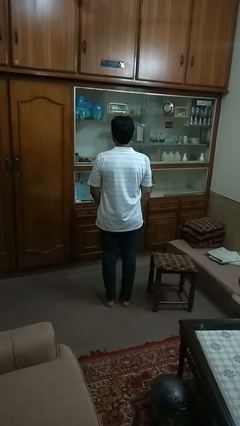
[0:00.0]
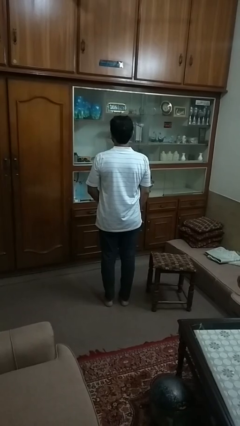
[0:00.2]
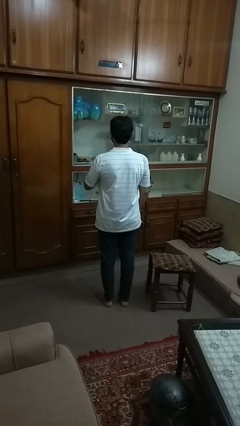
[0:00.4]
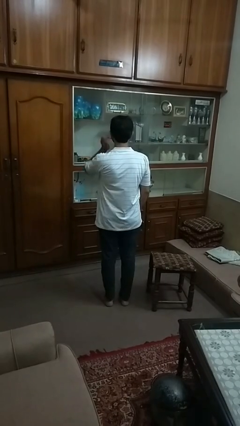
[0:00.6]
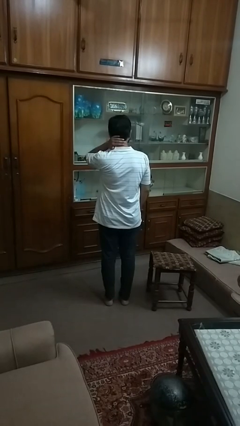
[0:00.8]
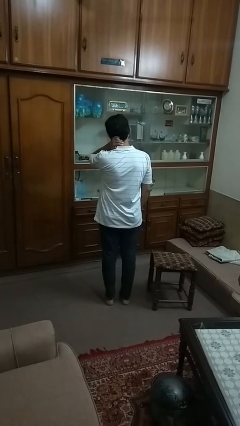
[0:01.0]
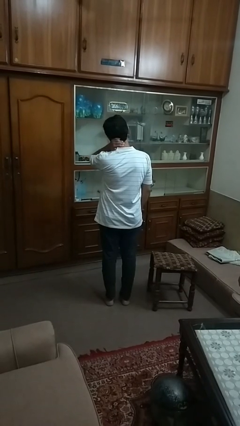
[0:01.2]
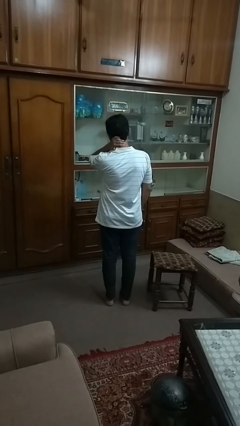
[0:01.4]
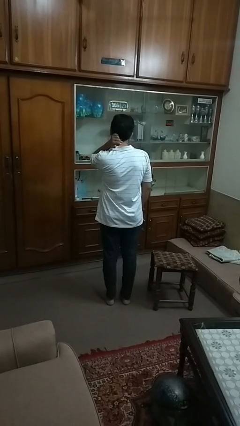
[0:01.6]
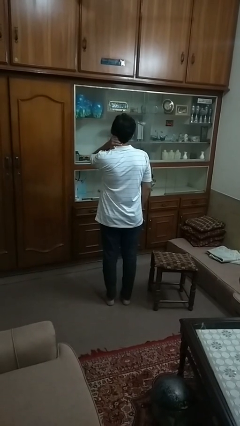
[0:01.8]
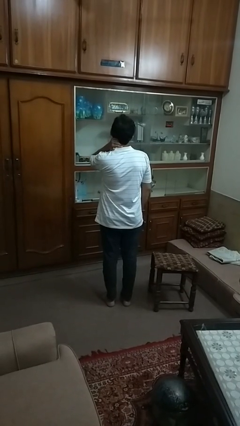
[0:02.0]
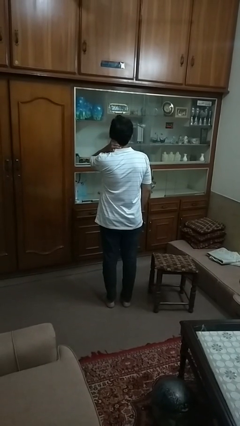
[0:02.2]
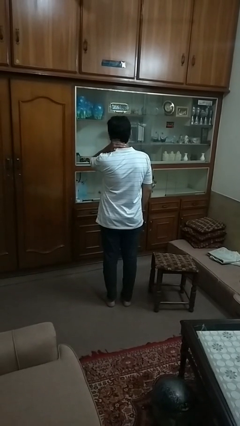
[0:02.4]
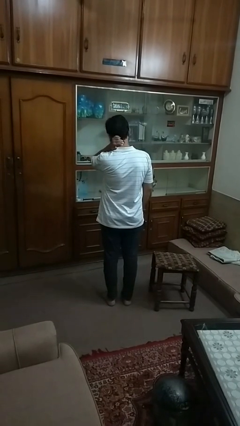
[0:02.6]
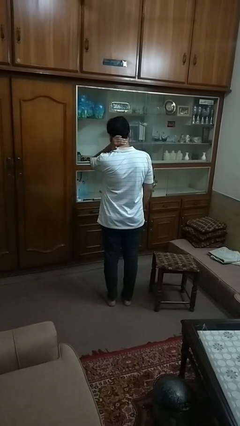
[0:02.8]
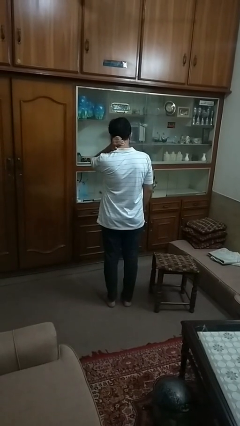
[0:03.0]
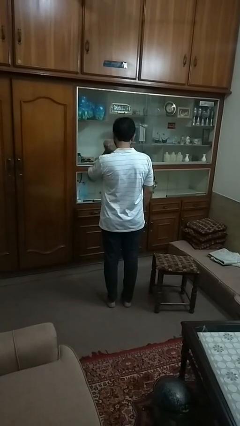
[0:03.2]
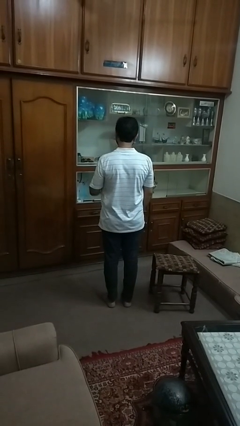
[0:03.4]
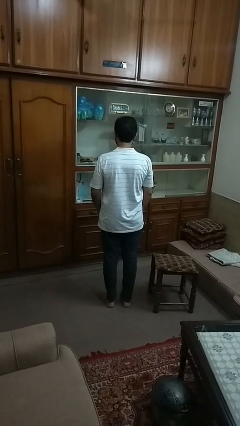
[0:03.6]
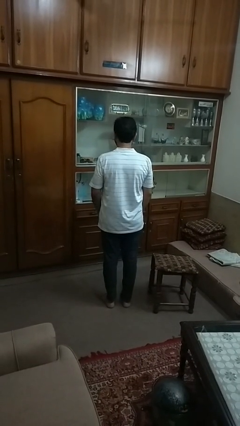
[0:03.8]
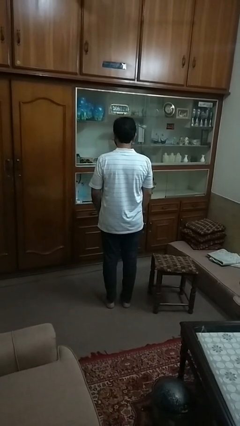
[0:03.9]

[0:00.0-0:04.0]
person rubs neck

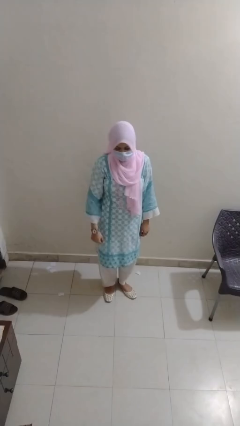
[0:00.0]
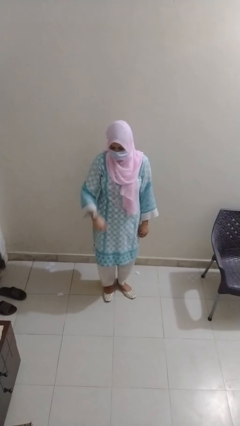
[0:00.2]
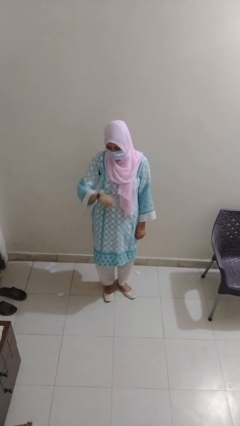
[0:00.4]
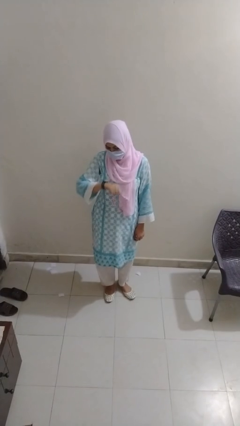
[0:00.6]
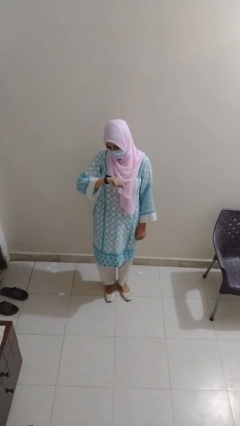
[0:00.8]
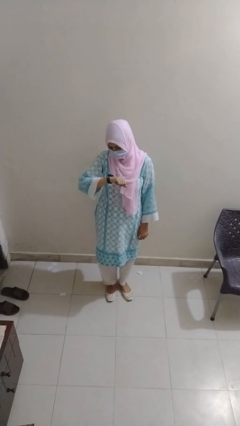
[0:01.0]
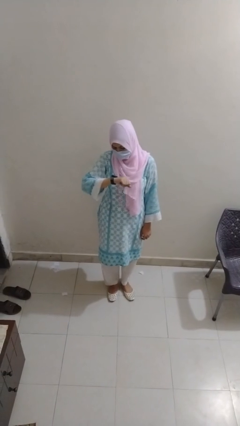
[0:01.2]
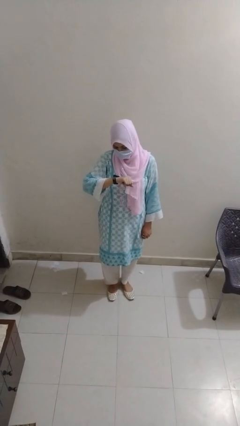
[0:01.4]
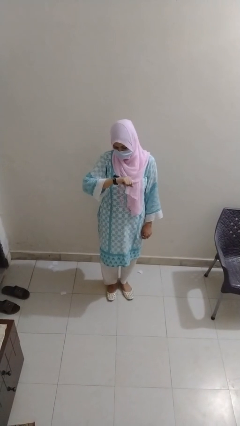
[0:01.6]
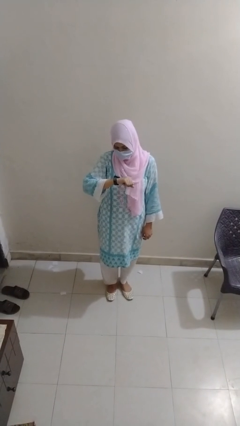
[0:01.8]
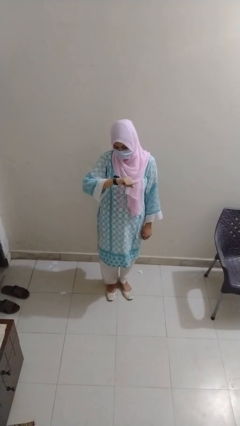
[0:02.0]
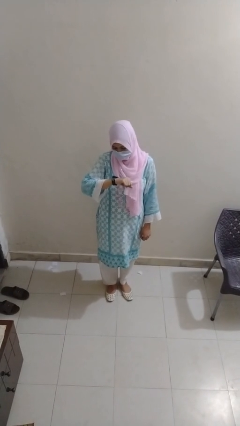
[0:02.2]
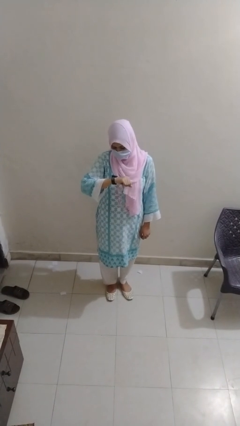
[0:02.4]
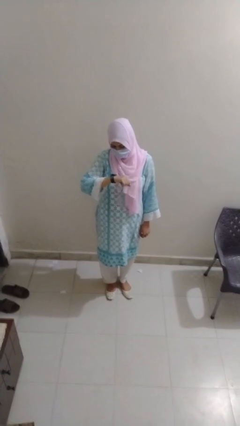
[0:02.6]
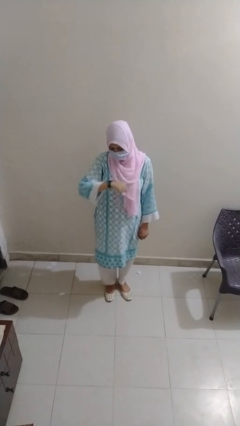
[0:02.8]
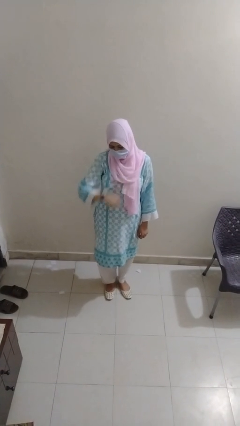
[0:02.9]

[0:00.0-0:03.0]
person looks at wristwatch

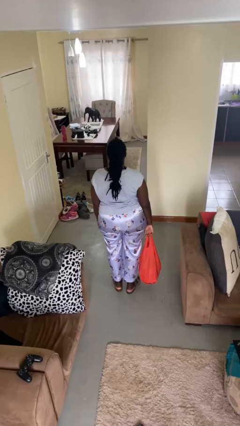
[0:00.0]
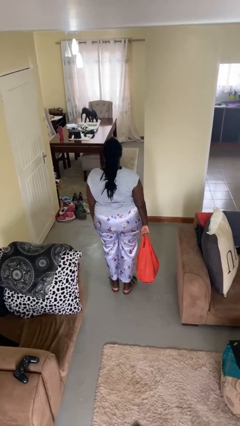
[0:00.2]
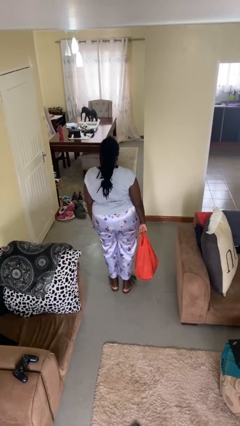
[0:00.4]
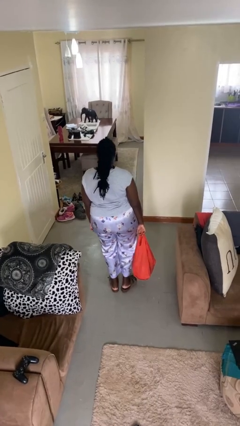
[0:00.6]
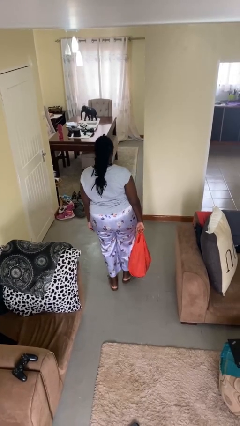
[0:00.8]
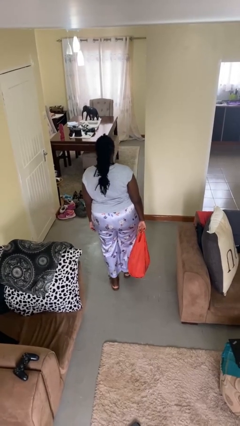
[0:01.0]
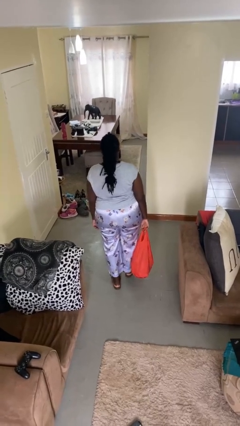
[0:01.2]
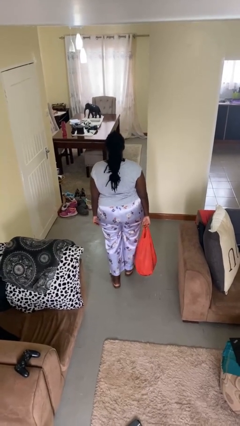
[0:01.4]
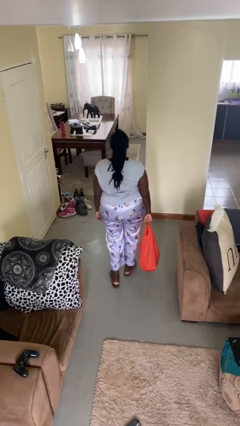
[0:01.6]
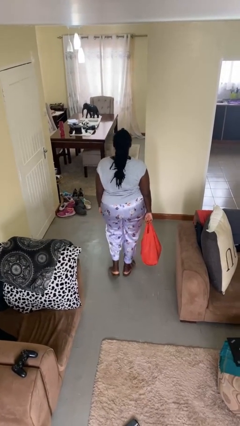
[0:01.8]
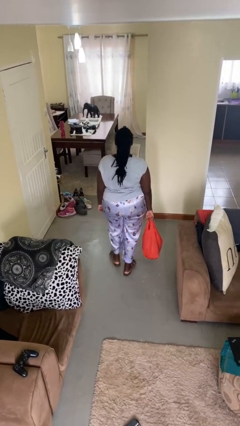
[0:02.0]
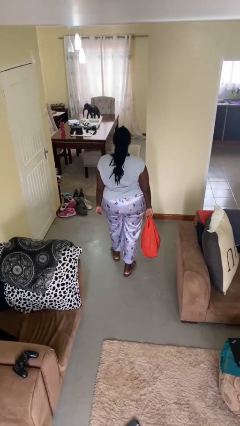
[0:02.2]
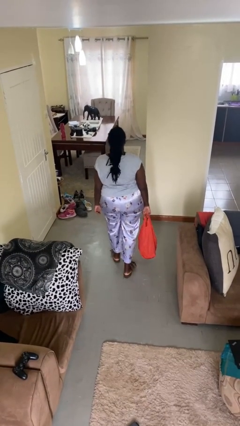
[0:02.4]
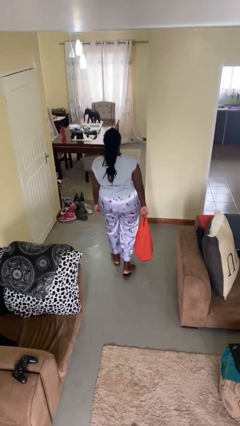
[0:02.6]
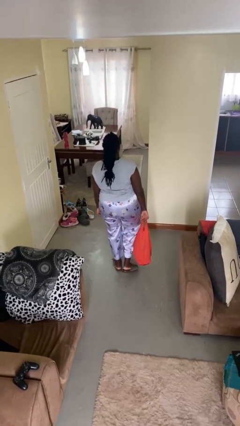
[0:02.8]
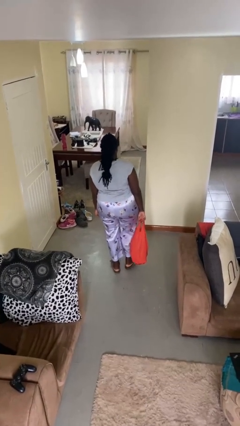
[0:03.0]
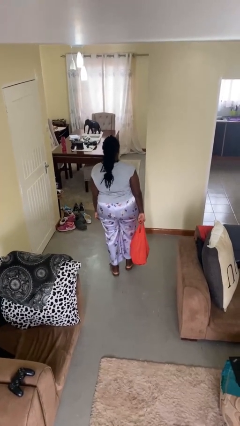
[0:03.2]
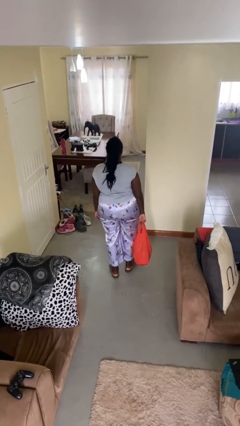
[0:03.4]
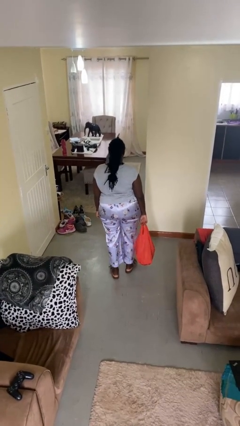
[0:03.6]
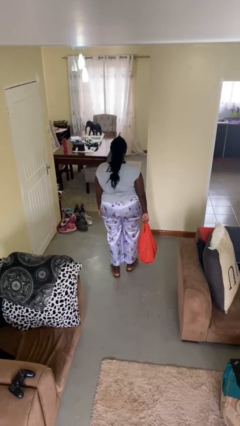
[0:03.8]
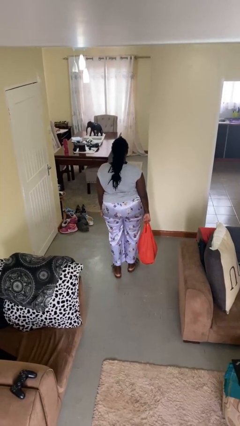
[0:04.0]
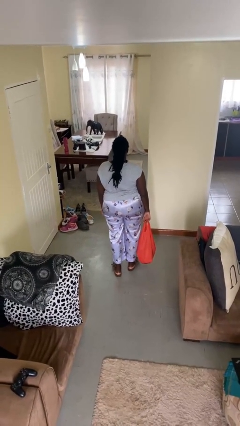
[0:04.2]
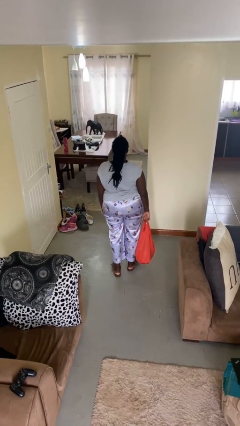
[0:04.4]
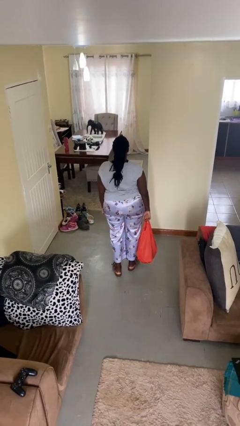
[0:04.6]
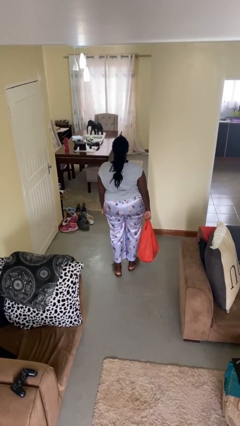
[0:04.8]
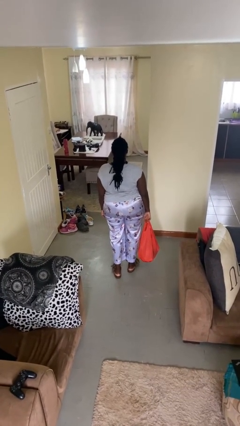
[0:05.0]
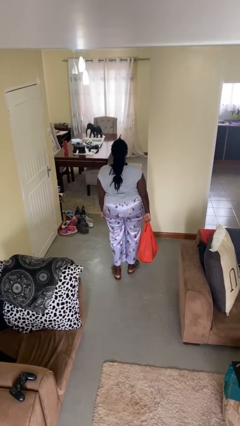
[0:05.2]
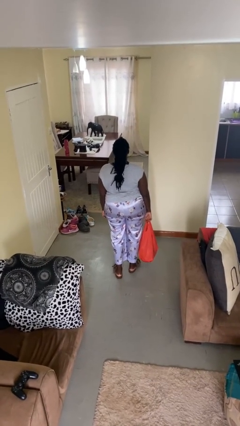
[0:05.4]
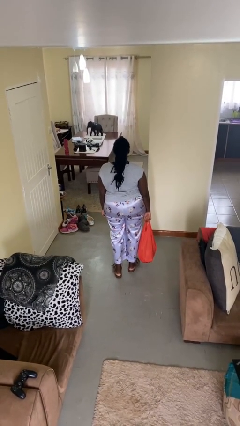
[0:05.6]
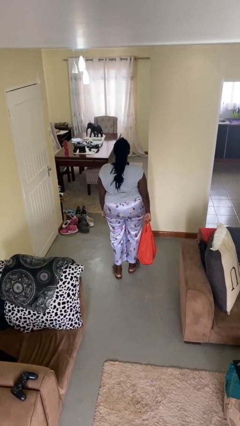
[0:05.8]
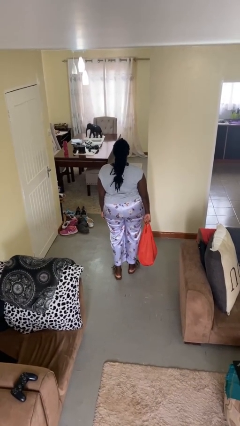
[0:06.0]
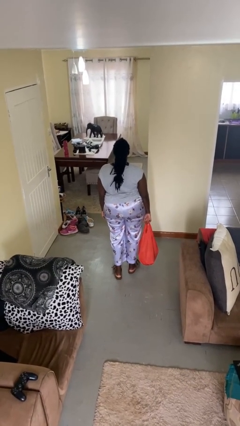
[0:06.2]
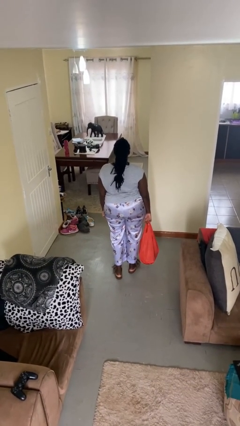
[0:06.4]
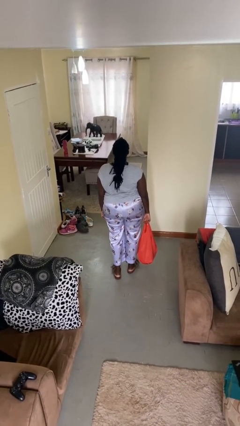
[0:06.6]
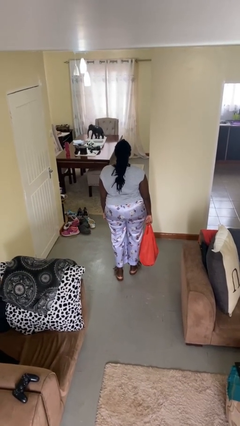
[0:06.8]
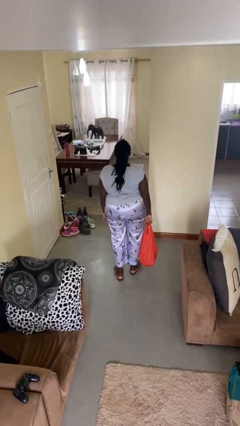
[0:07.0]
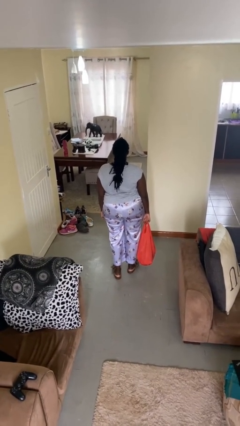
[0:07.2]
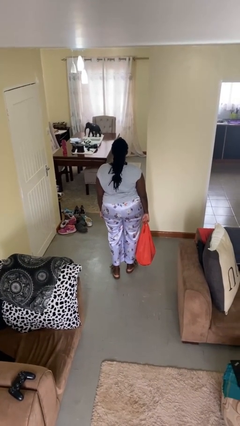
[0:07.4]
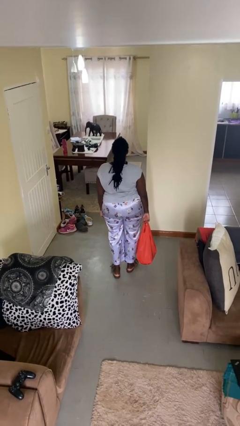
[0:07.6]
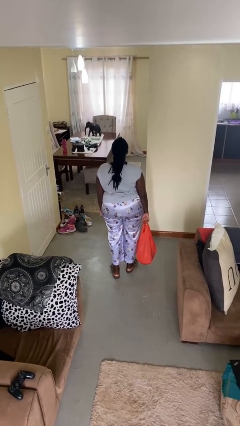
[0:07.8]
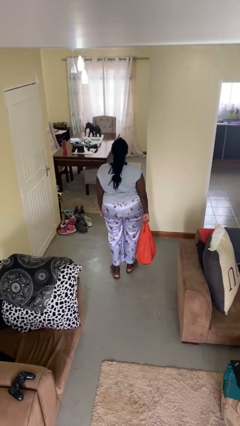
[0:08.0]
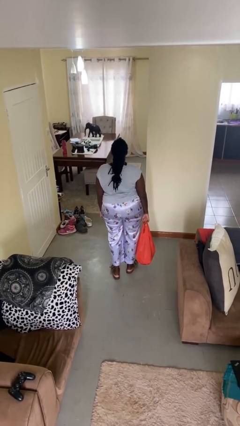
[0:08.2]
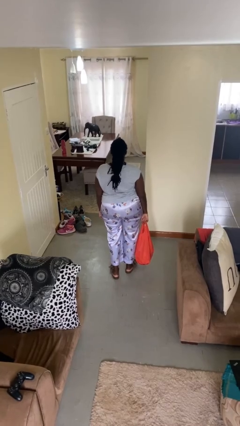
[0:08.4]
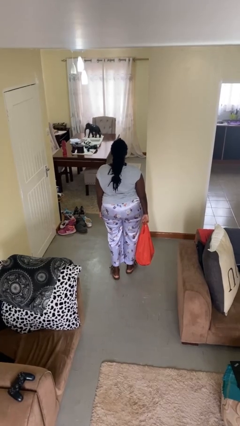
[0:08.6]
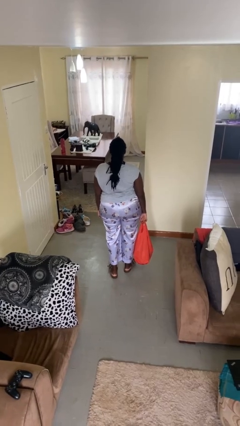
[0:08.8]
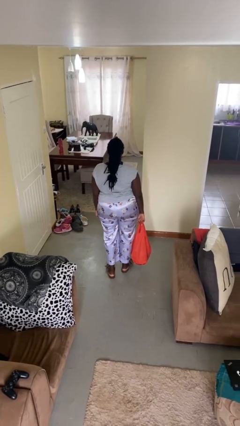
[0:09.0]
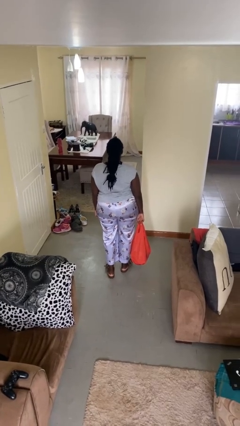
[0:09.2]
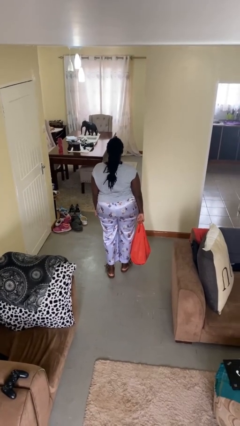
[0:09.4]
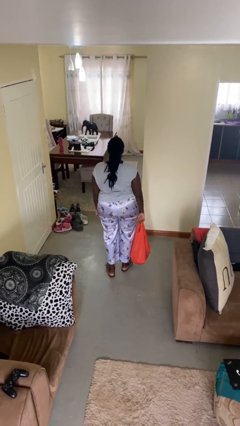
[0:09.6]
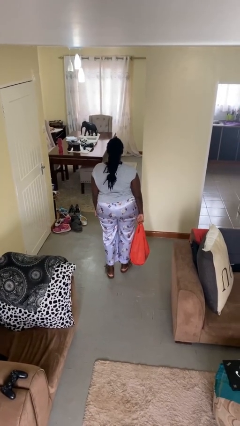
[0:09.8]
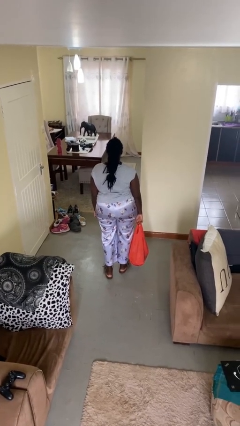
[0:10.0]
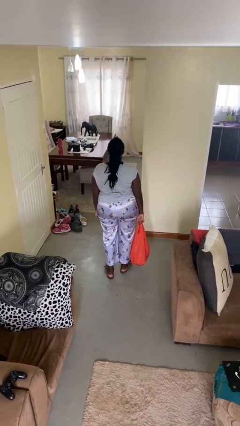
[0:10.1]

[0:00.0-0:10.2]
person carries groceries

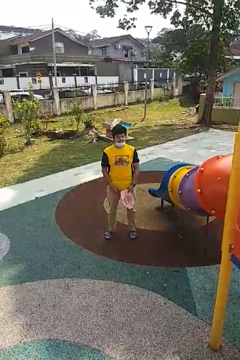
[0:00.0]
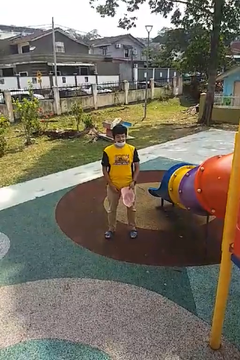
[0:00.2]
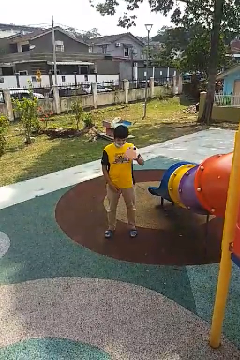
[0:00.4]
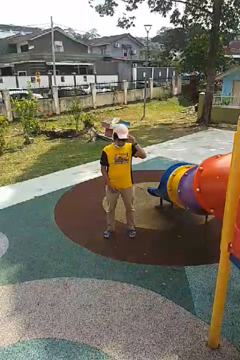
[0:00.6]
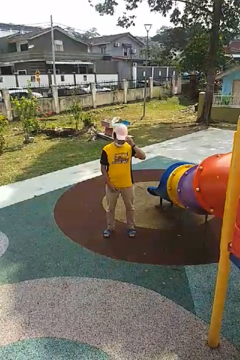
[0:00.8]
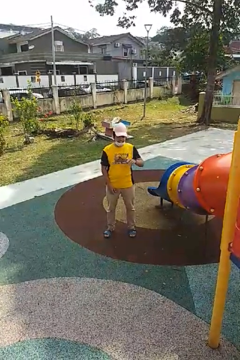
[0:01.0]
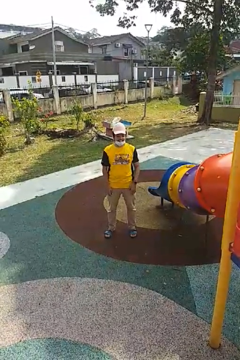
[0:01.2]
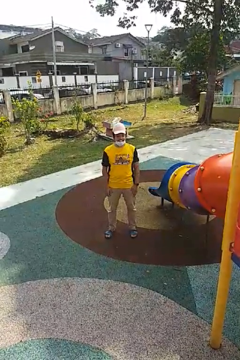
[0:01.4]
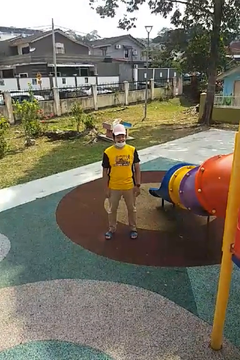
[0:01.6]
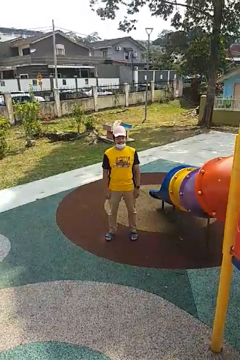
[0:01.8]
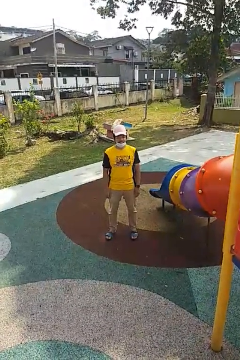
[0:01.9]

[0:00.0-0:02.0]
person puts on hat
